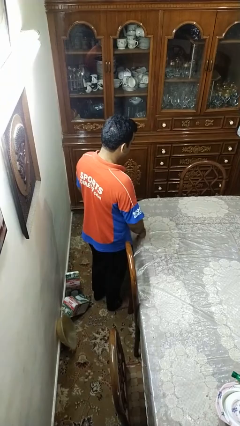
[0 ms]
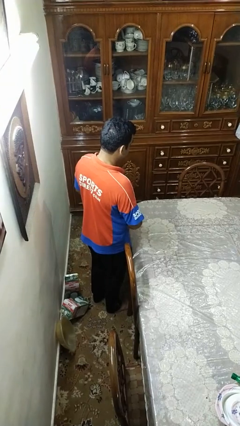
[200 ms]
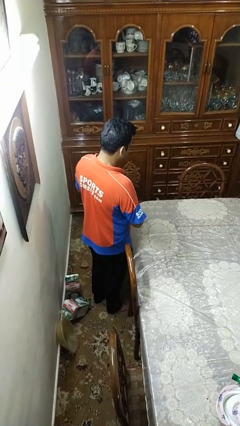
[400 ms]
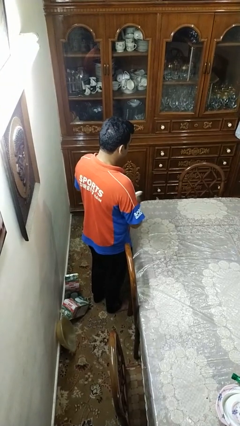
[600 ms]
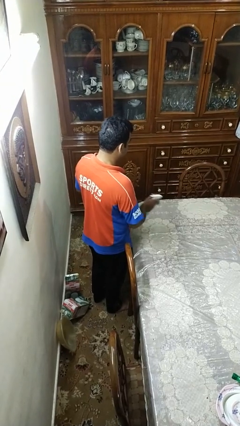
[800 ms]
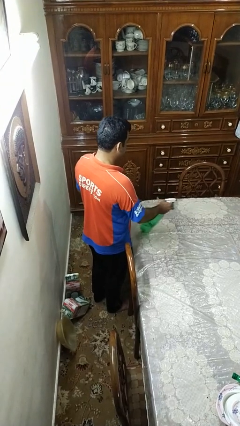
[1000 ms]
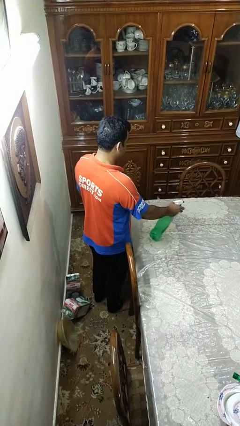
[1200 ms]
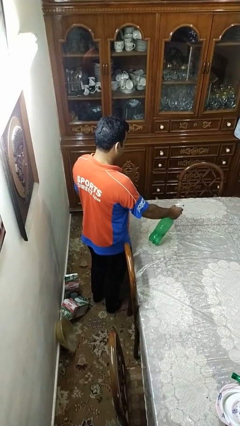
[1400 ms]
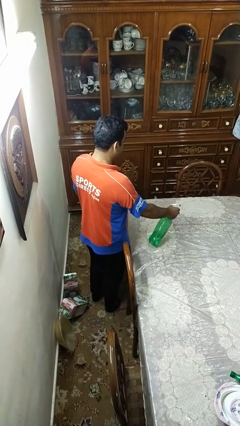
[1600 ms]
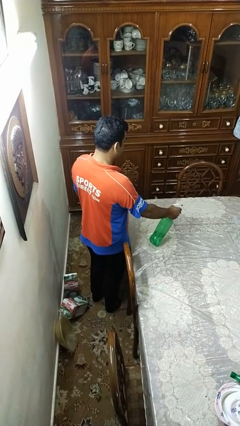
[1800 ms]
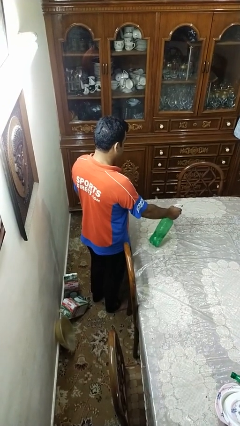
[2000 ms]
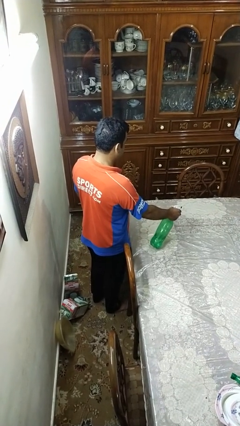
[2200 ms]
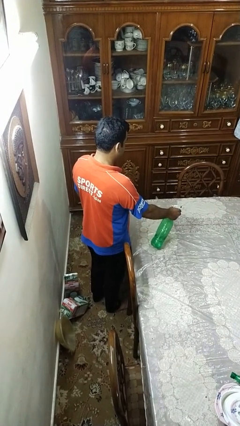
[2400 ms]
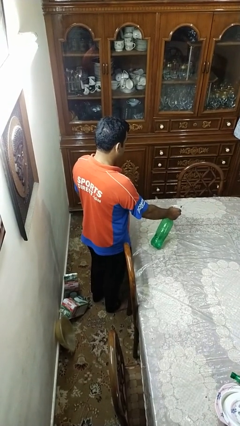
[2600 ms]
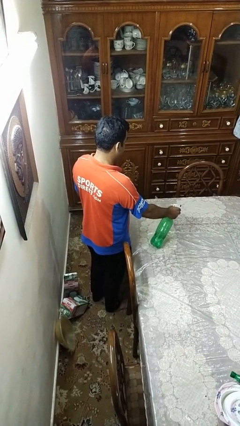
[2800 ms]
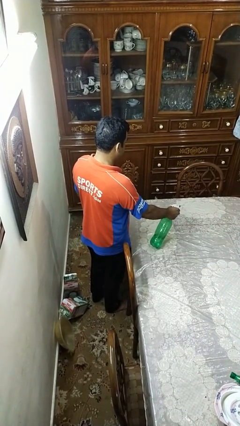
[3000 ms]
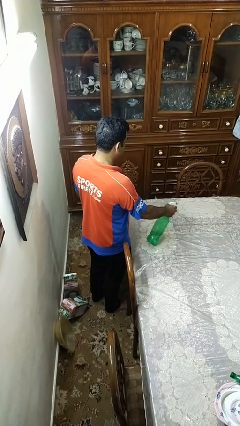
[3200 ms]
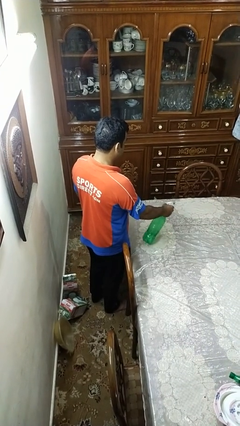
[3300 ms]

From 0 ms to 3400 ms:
person sprays from bottle

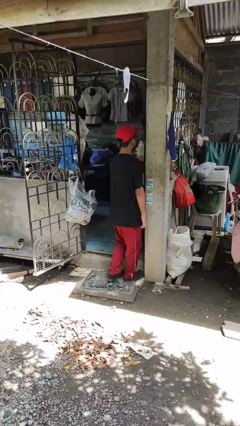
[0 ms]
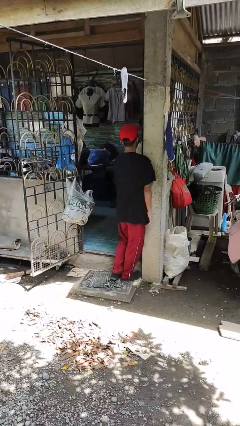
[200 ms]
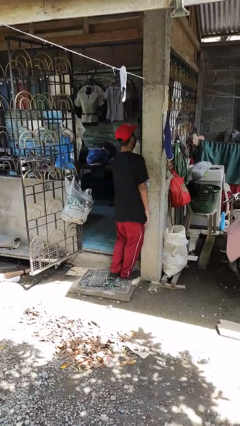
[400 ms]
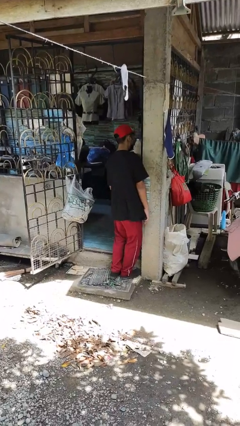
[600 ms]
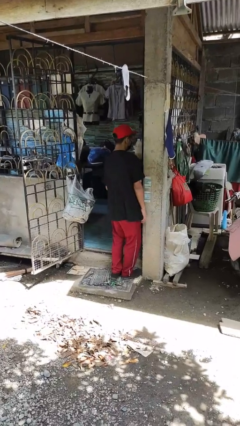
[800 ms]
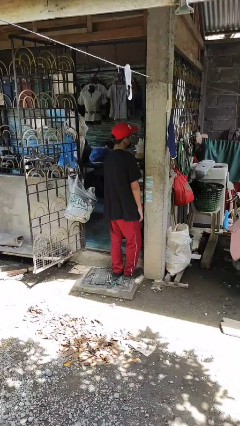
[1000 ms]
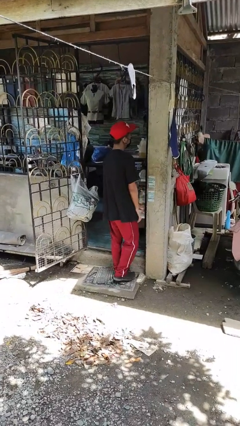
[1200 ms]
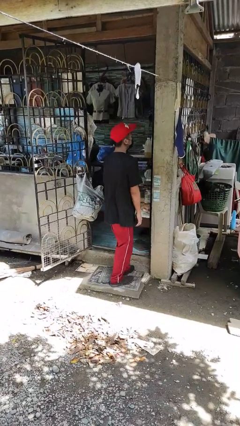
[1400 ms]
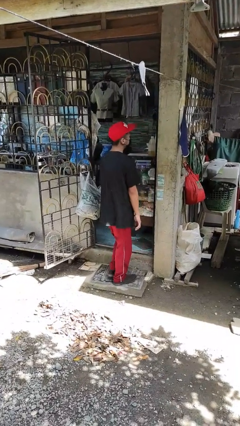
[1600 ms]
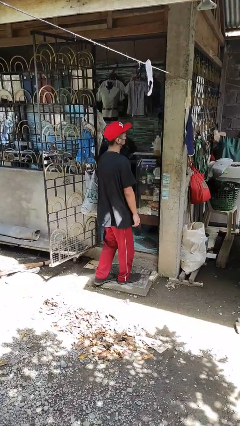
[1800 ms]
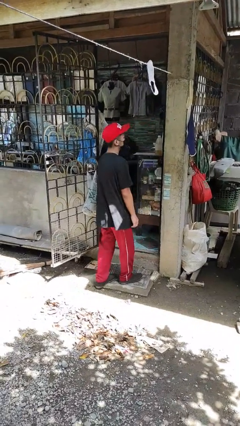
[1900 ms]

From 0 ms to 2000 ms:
person bumps into wall

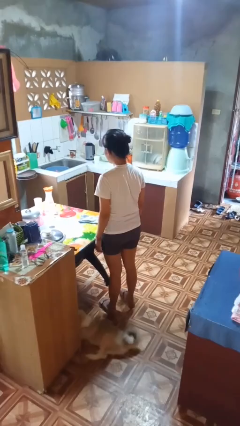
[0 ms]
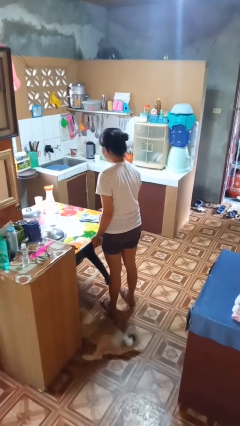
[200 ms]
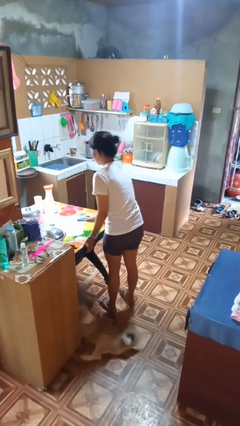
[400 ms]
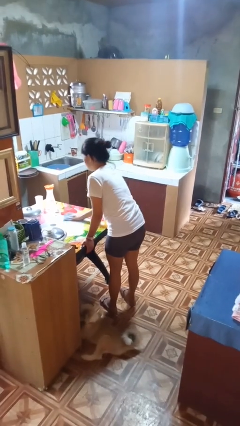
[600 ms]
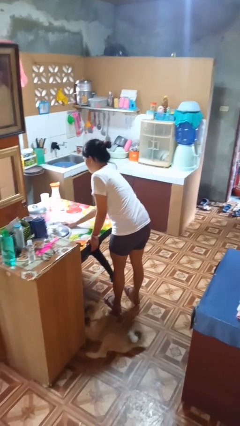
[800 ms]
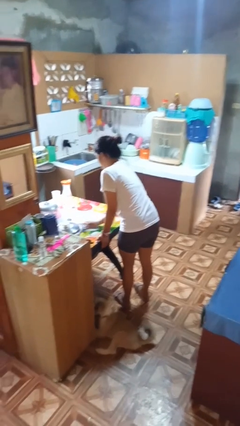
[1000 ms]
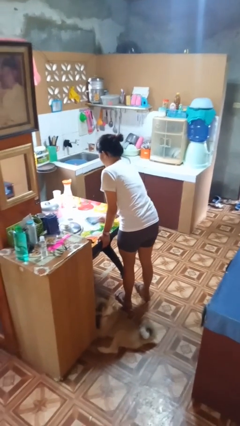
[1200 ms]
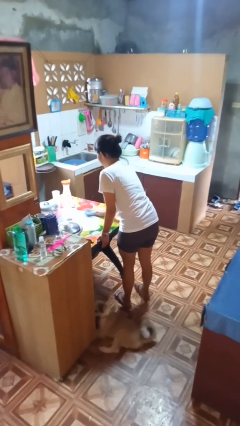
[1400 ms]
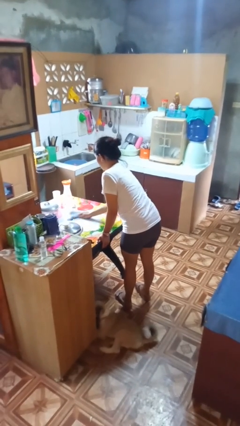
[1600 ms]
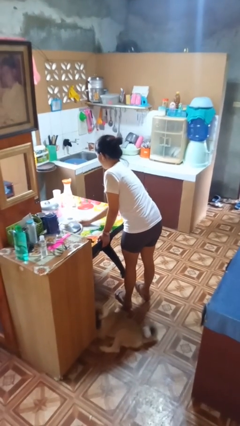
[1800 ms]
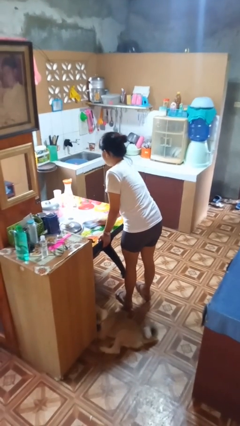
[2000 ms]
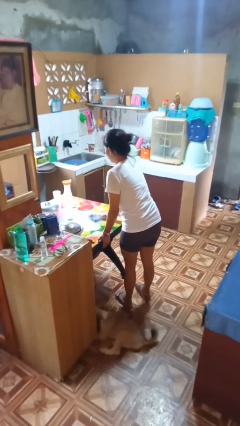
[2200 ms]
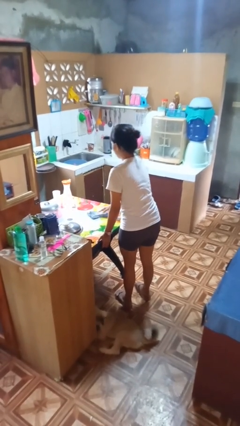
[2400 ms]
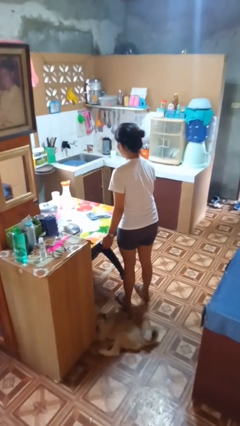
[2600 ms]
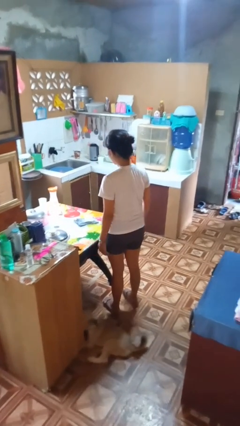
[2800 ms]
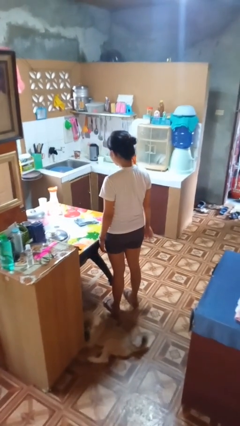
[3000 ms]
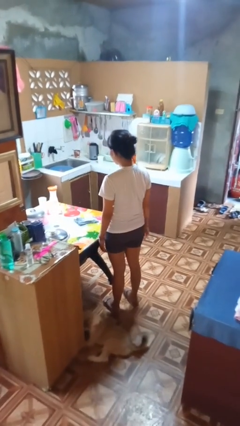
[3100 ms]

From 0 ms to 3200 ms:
person cleans table with rag

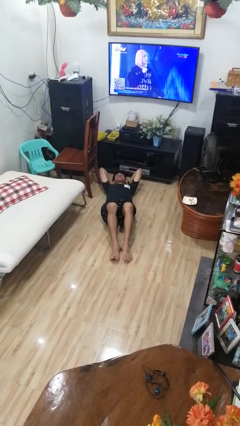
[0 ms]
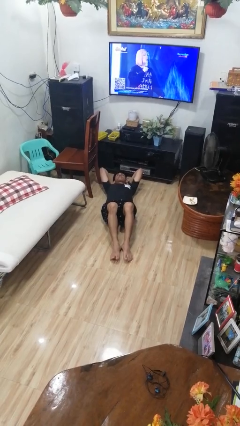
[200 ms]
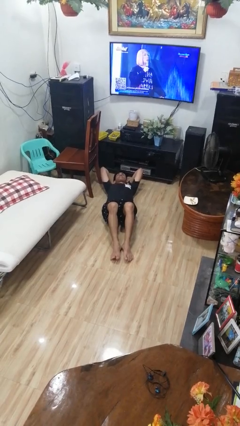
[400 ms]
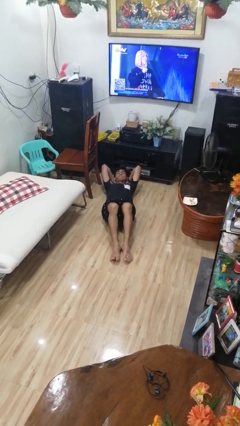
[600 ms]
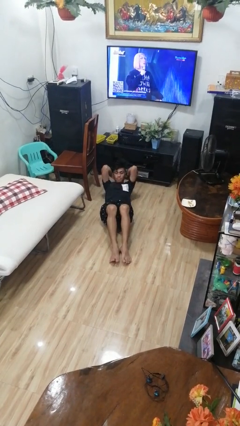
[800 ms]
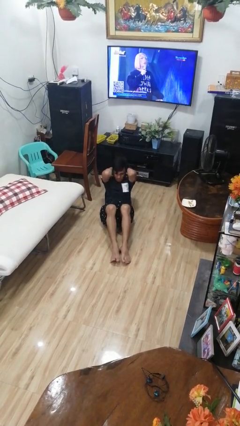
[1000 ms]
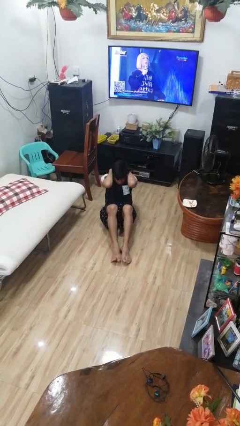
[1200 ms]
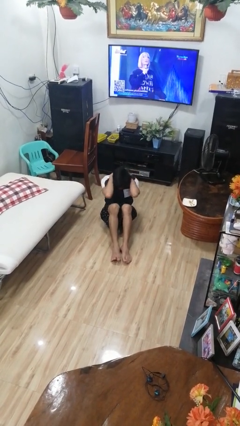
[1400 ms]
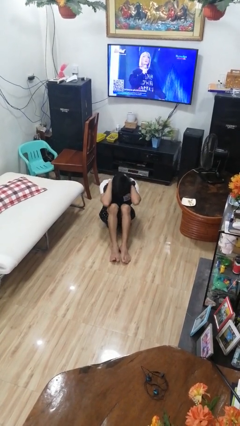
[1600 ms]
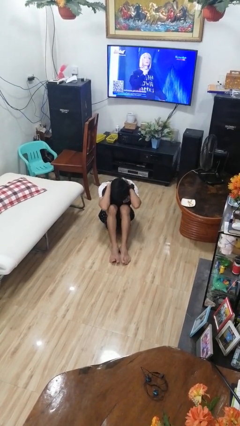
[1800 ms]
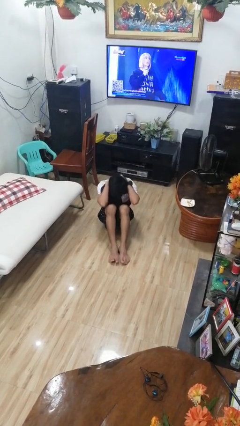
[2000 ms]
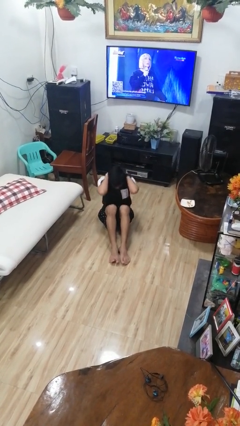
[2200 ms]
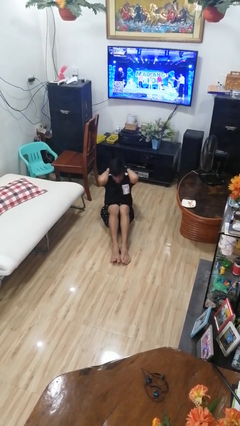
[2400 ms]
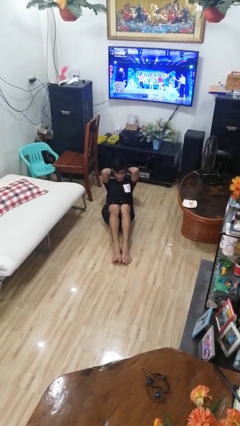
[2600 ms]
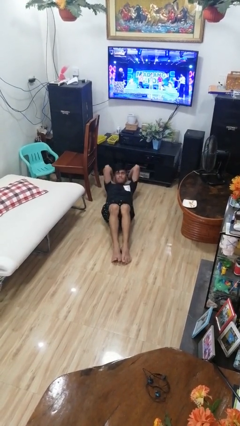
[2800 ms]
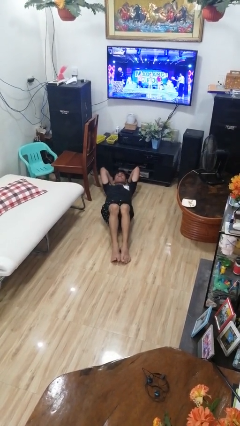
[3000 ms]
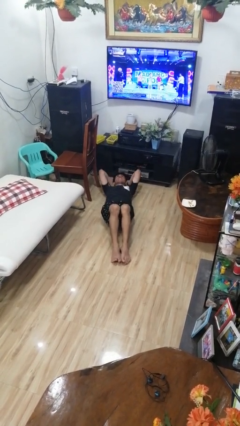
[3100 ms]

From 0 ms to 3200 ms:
person exercises with situp

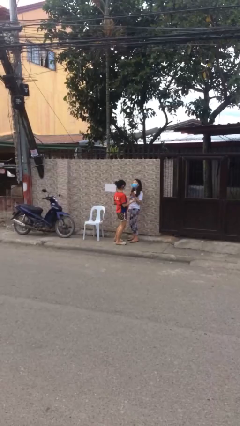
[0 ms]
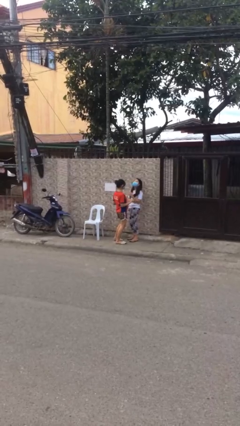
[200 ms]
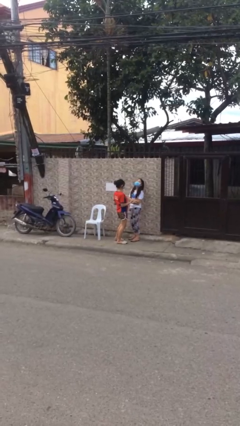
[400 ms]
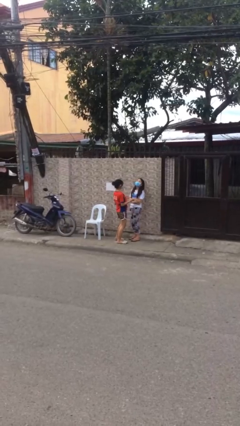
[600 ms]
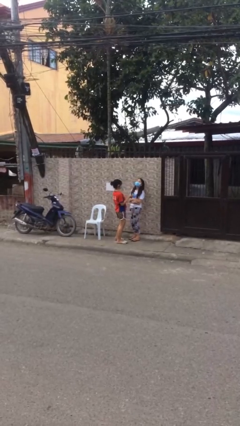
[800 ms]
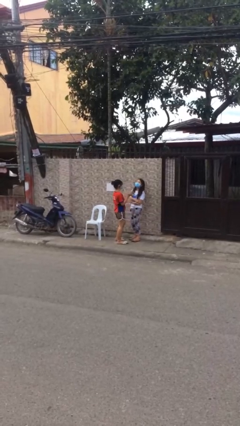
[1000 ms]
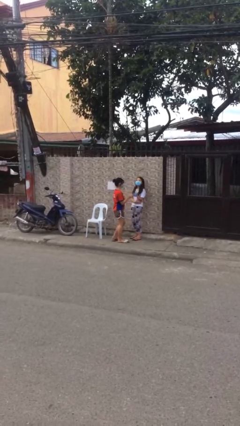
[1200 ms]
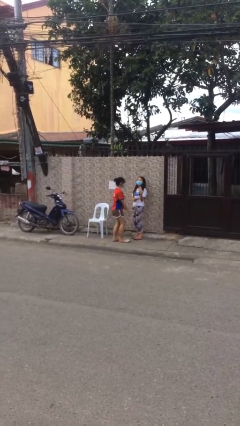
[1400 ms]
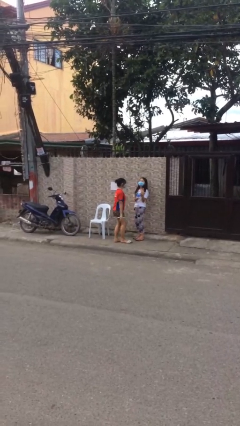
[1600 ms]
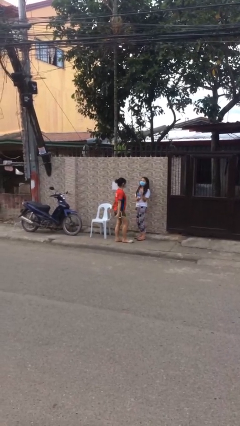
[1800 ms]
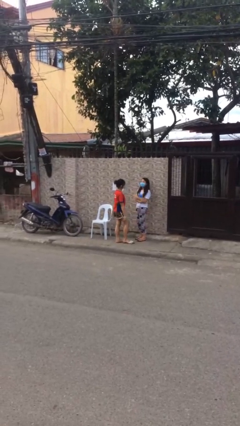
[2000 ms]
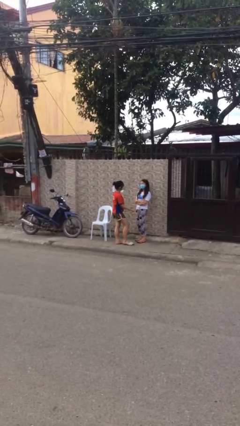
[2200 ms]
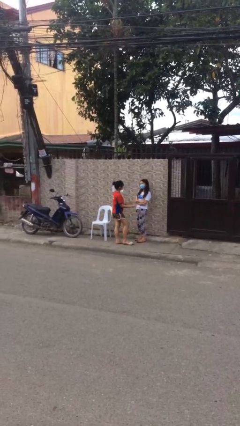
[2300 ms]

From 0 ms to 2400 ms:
person talks to person

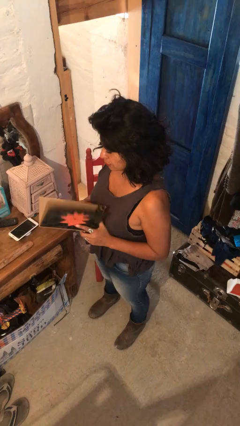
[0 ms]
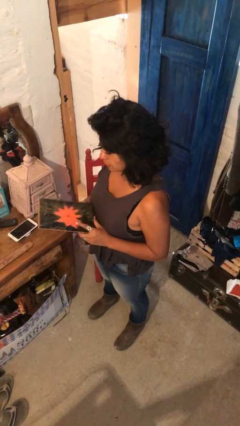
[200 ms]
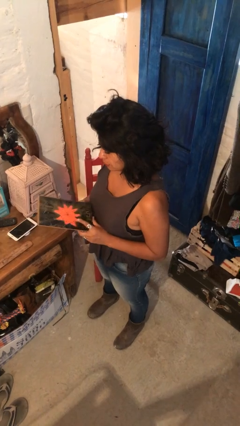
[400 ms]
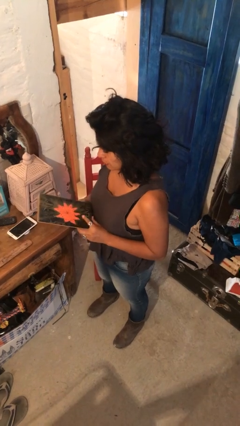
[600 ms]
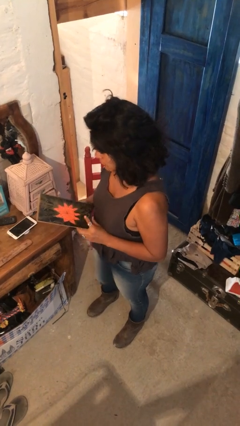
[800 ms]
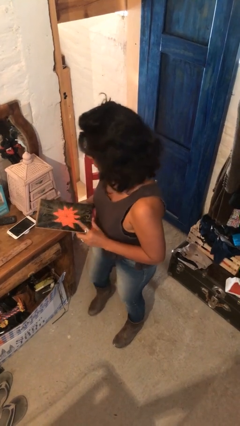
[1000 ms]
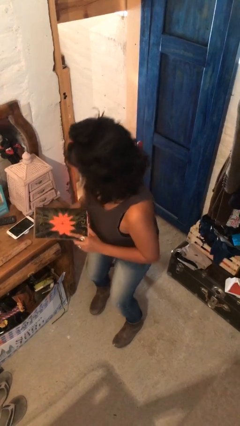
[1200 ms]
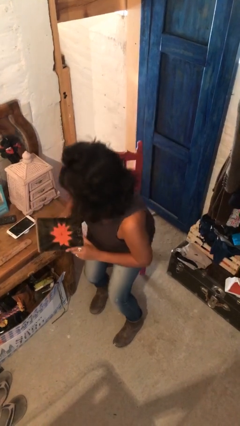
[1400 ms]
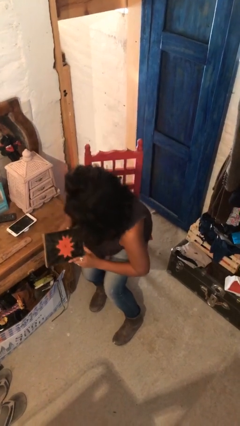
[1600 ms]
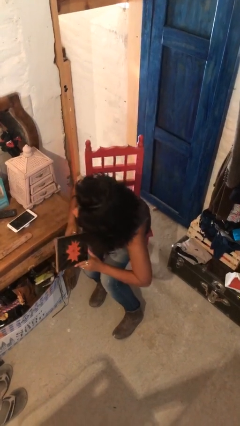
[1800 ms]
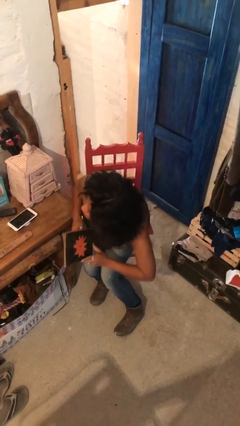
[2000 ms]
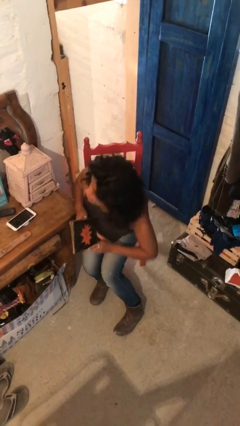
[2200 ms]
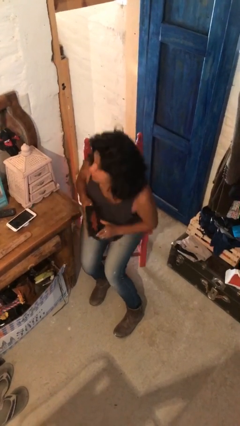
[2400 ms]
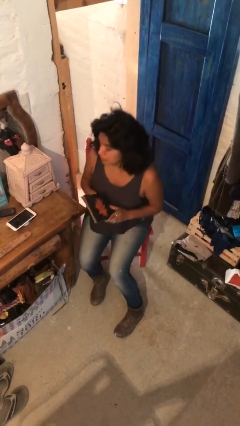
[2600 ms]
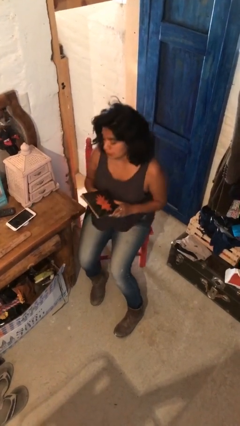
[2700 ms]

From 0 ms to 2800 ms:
person sits down

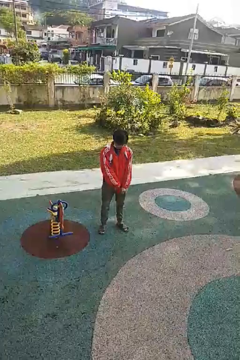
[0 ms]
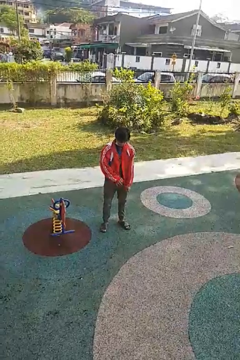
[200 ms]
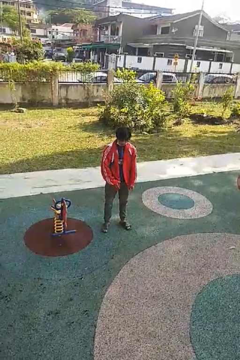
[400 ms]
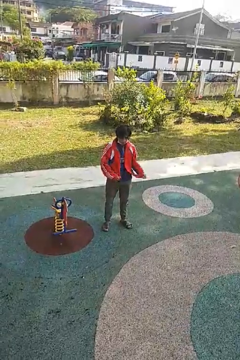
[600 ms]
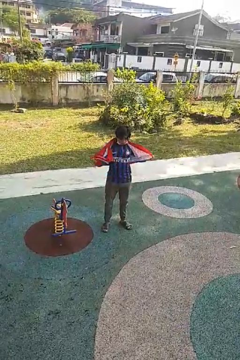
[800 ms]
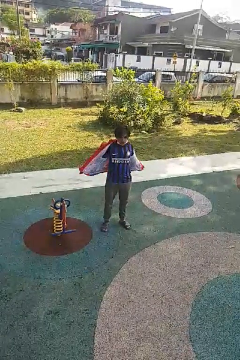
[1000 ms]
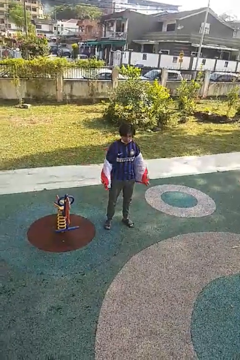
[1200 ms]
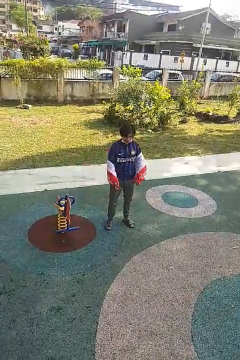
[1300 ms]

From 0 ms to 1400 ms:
person takes off jacket
